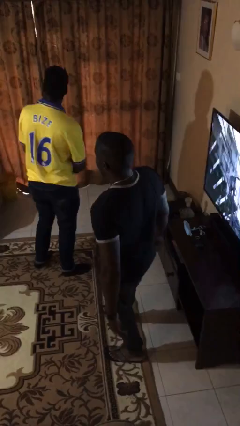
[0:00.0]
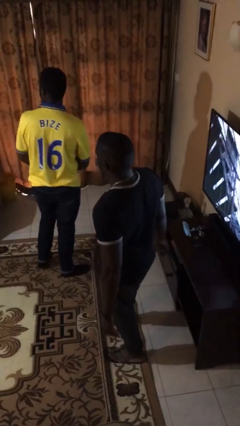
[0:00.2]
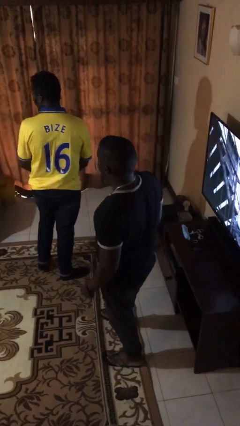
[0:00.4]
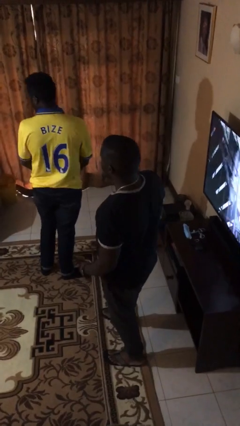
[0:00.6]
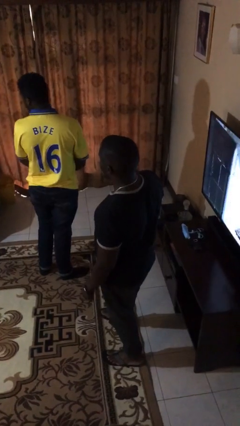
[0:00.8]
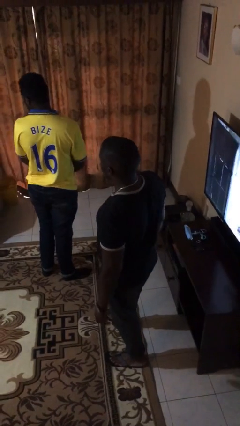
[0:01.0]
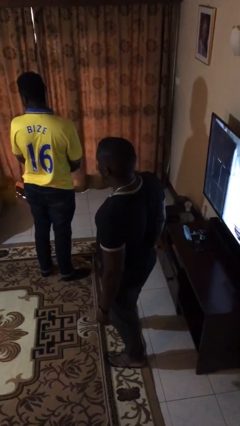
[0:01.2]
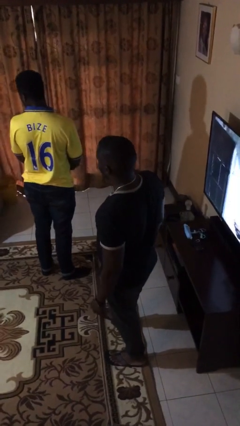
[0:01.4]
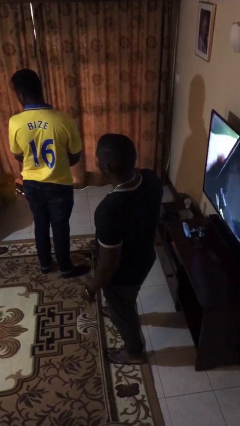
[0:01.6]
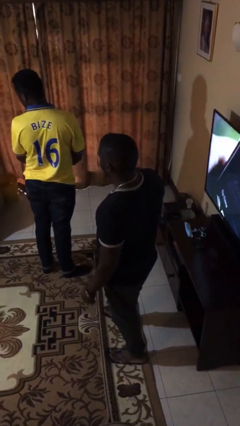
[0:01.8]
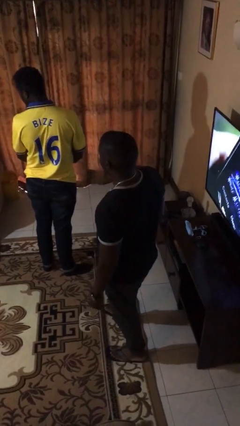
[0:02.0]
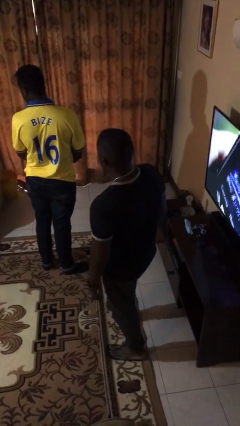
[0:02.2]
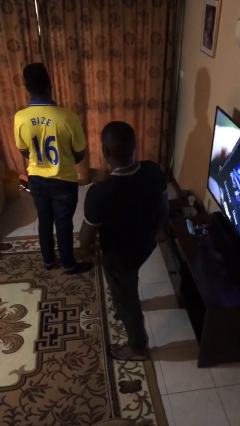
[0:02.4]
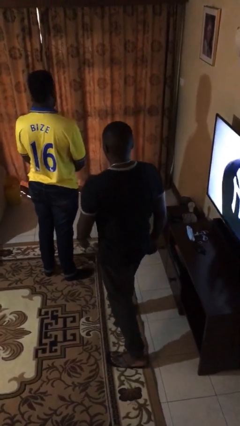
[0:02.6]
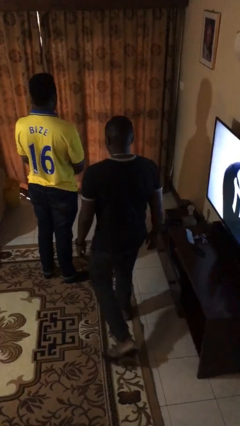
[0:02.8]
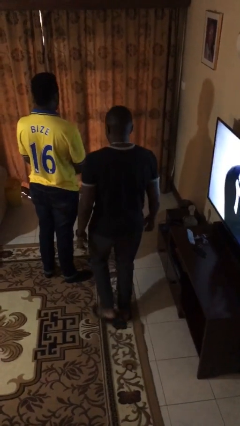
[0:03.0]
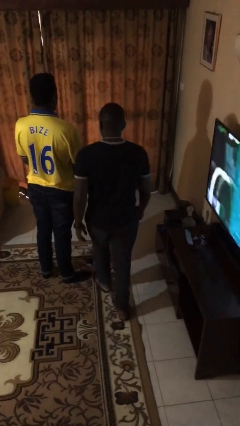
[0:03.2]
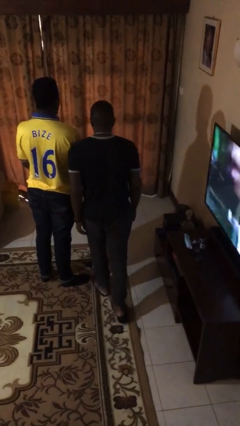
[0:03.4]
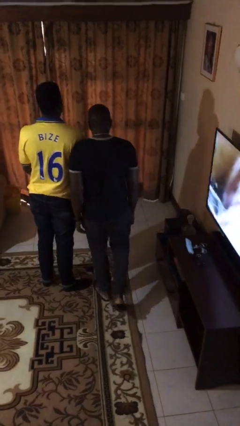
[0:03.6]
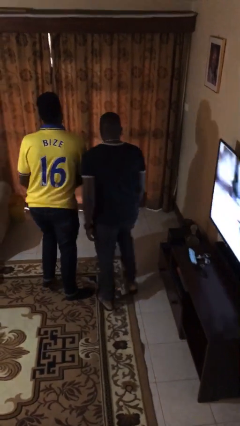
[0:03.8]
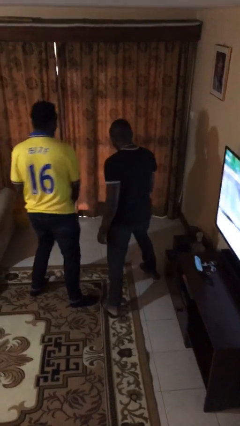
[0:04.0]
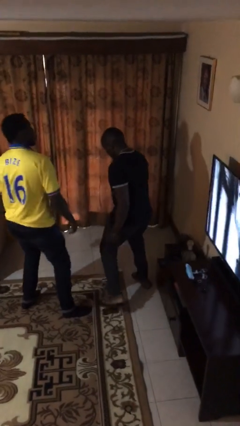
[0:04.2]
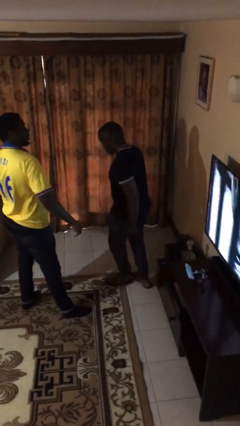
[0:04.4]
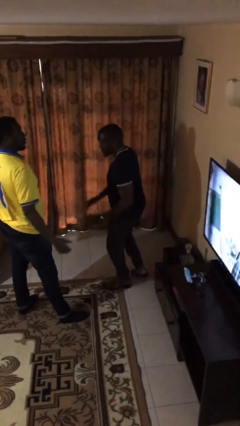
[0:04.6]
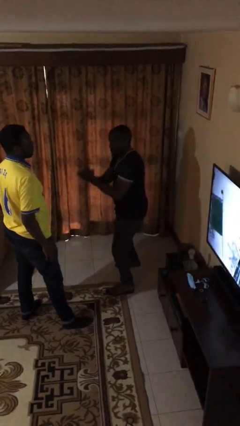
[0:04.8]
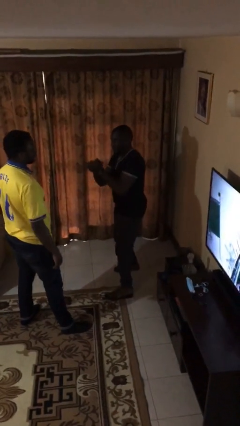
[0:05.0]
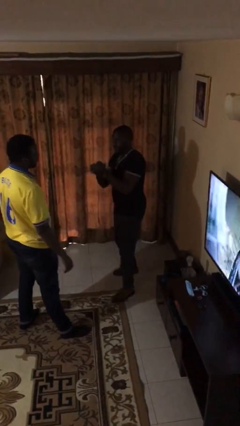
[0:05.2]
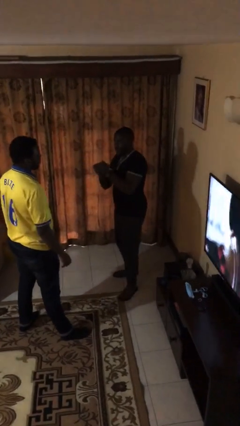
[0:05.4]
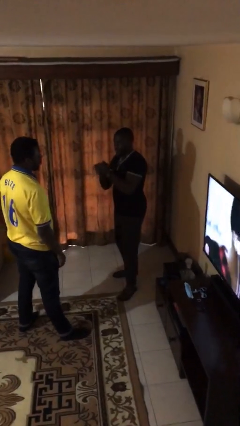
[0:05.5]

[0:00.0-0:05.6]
person bumps into person

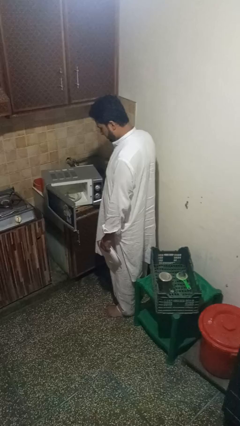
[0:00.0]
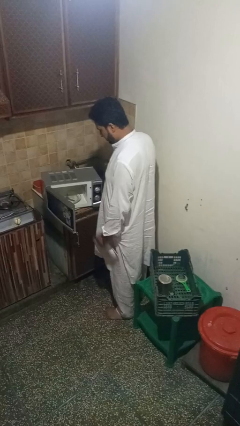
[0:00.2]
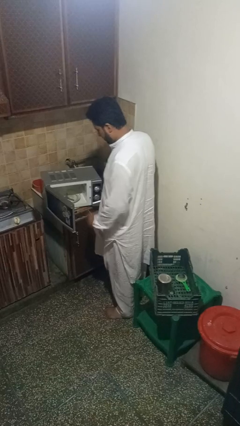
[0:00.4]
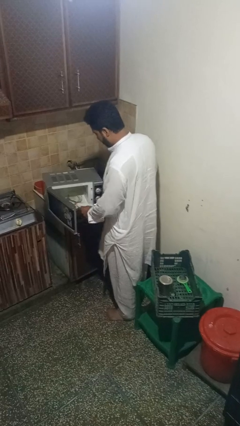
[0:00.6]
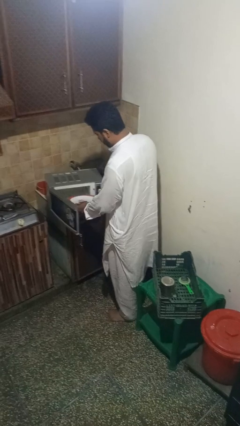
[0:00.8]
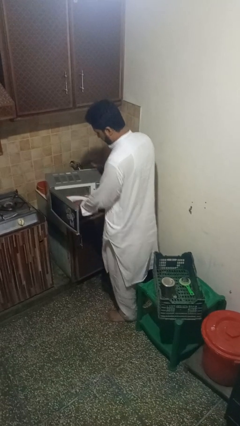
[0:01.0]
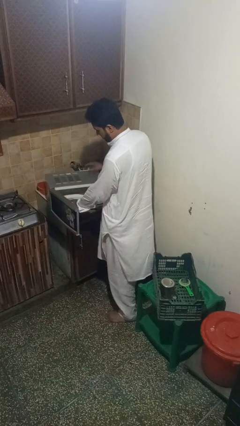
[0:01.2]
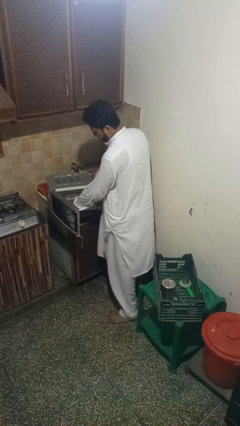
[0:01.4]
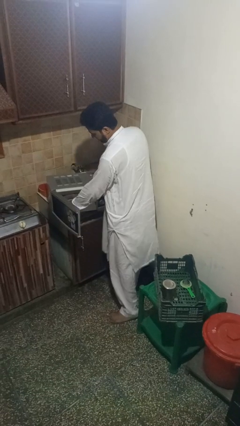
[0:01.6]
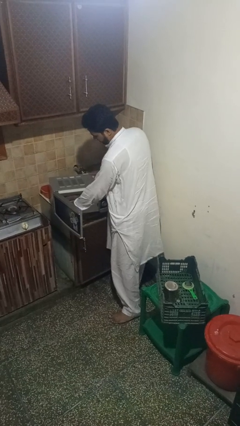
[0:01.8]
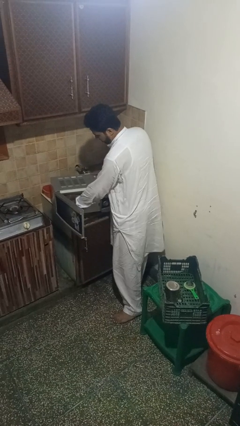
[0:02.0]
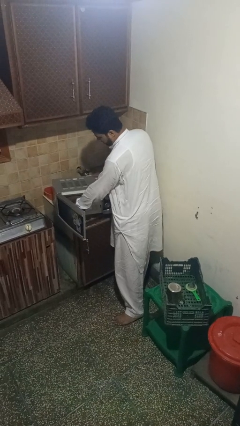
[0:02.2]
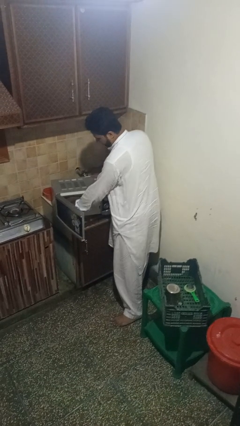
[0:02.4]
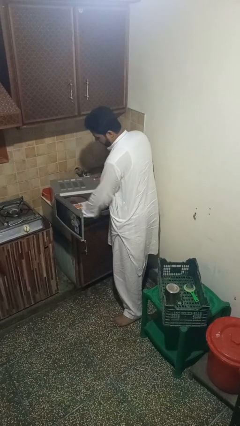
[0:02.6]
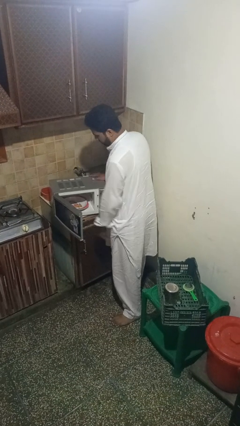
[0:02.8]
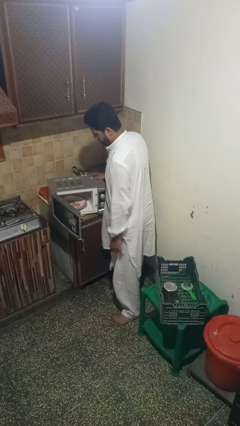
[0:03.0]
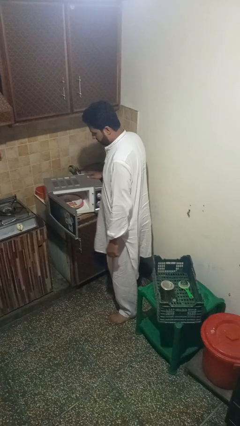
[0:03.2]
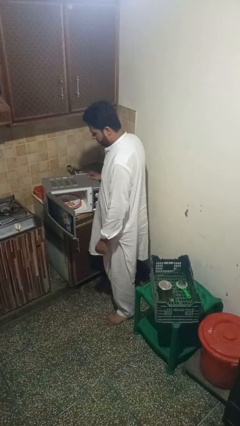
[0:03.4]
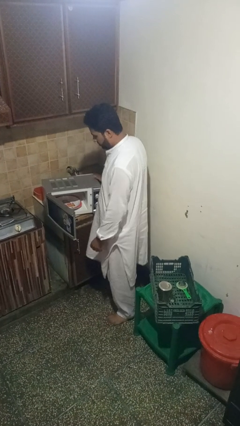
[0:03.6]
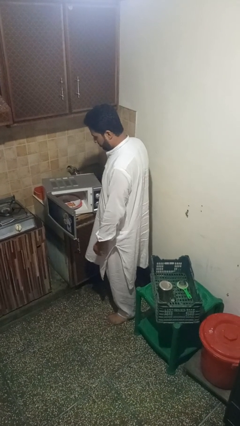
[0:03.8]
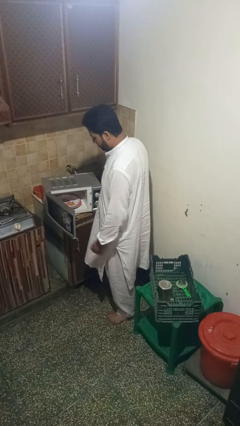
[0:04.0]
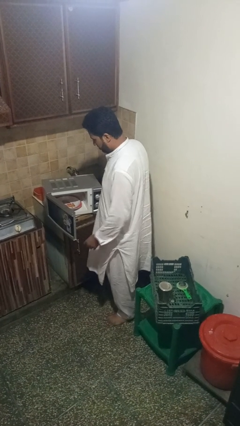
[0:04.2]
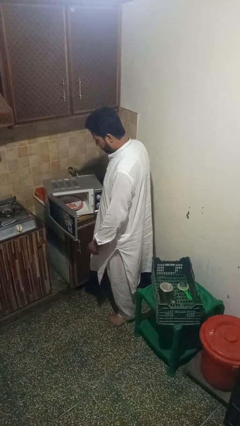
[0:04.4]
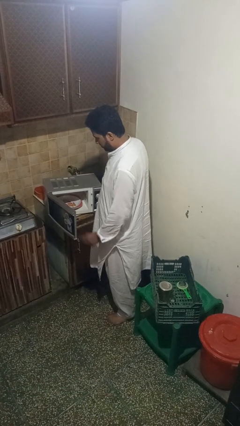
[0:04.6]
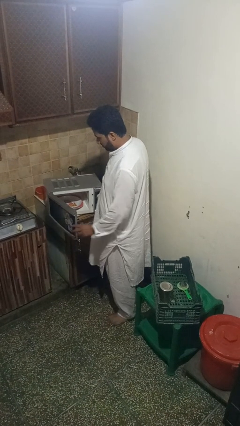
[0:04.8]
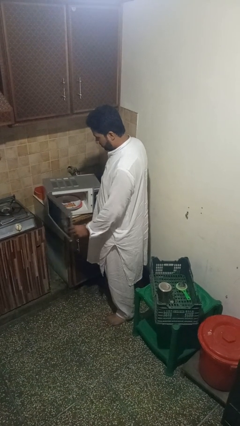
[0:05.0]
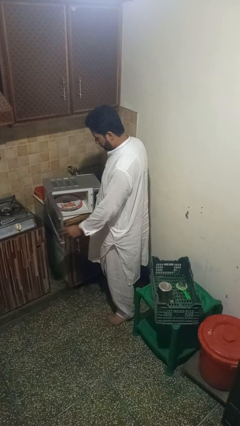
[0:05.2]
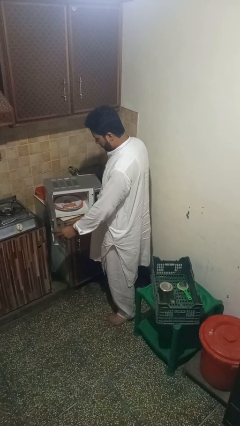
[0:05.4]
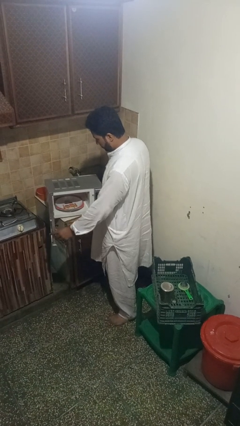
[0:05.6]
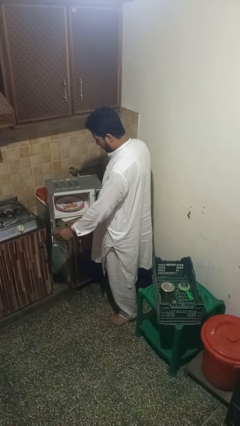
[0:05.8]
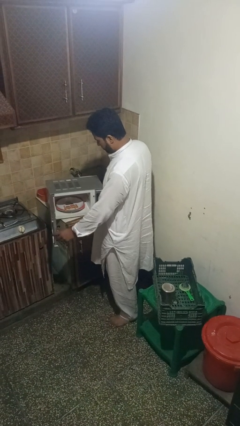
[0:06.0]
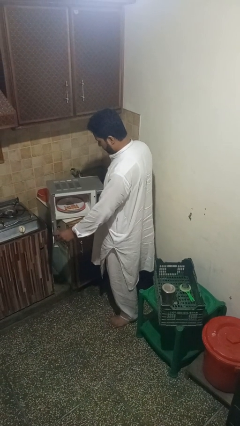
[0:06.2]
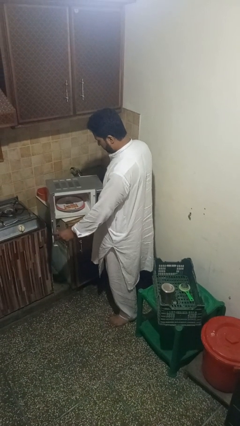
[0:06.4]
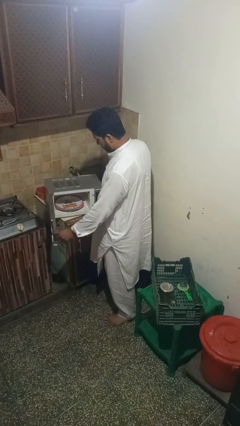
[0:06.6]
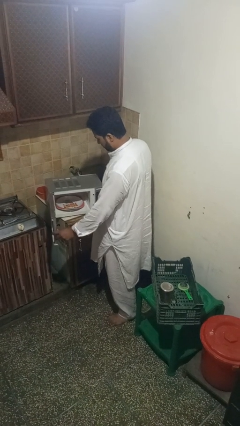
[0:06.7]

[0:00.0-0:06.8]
person puts object into microwave

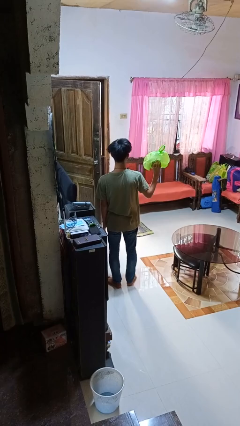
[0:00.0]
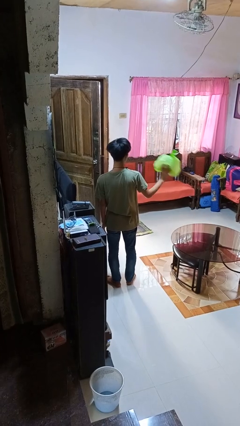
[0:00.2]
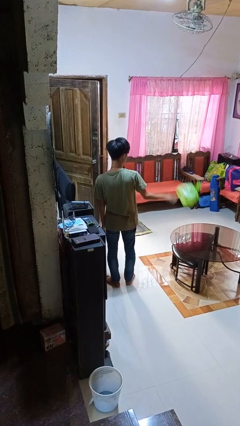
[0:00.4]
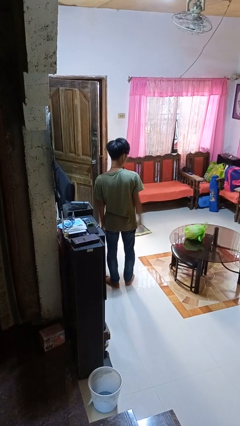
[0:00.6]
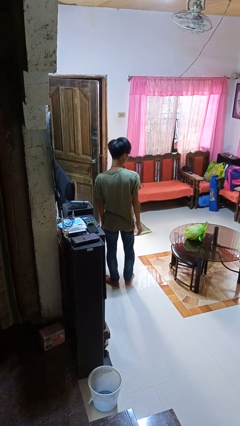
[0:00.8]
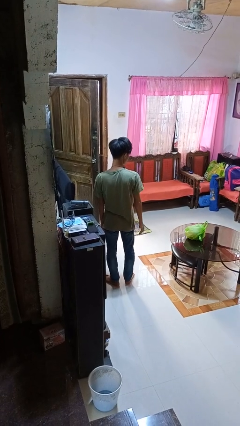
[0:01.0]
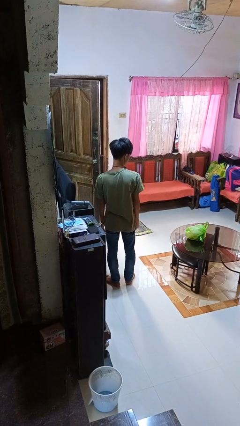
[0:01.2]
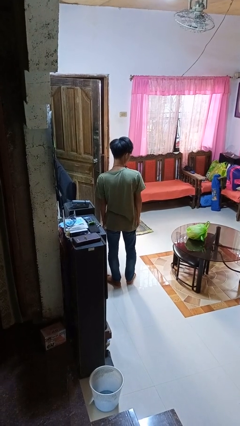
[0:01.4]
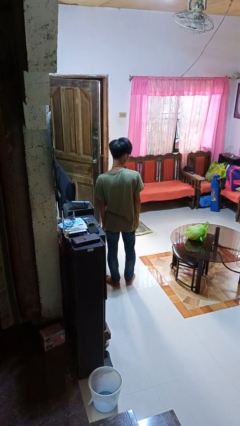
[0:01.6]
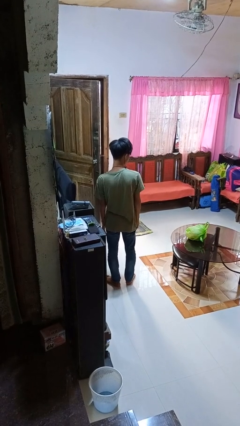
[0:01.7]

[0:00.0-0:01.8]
person throws object on table

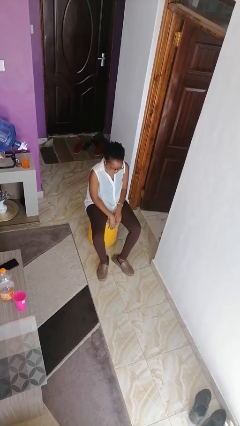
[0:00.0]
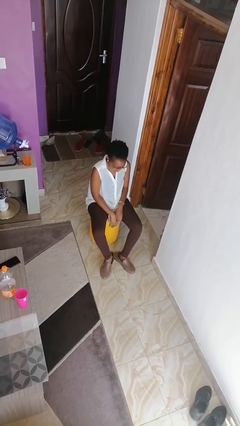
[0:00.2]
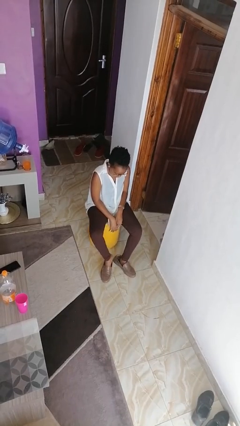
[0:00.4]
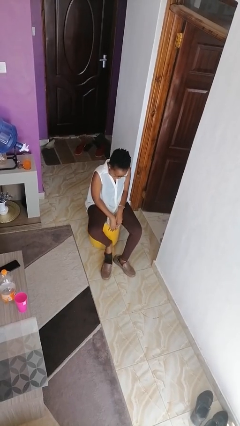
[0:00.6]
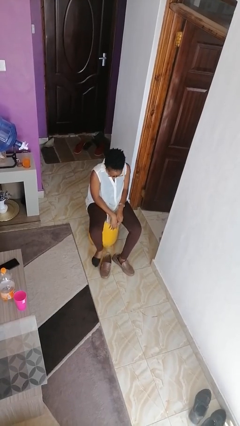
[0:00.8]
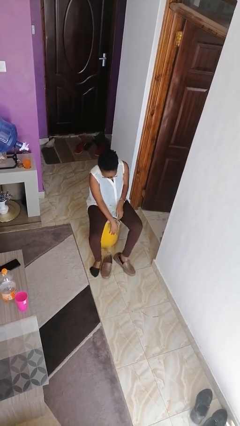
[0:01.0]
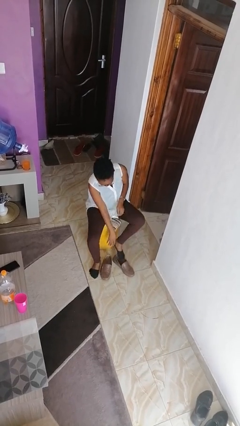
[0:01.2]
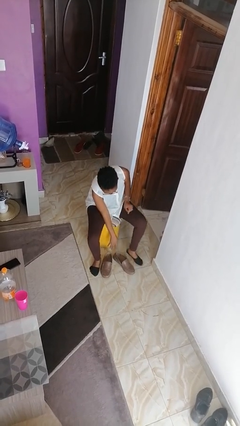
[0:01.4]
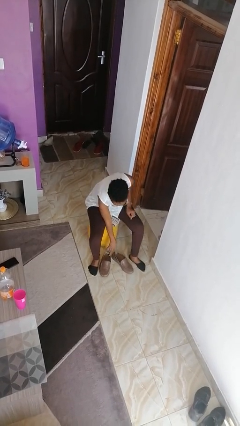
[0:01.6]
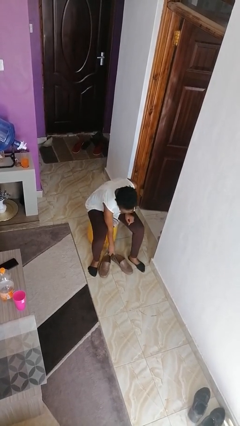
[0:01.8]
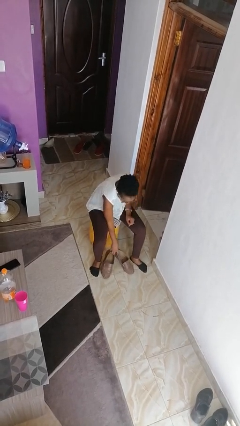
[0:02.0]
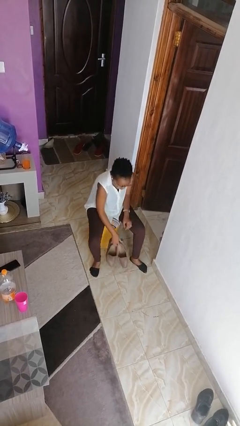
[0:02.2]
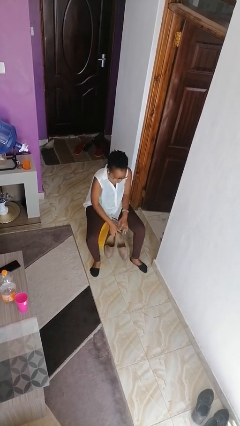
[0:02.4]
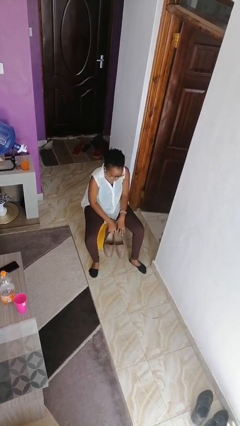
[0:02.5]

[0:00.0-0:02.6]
person takes off shoes

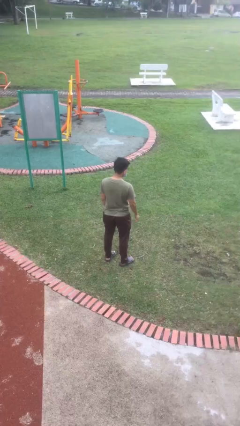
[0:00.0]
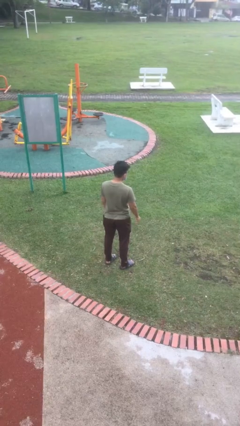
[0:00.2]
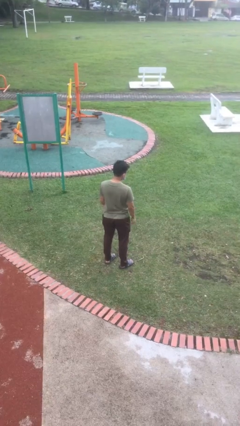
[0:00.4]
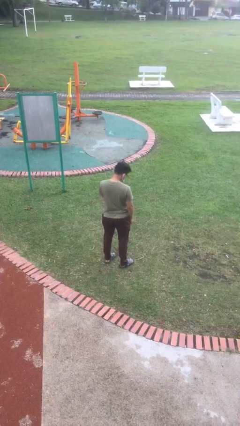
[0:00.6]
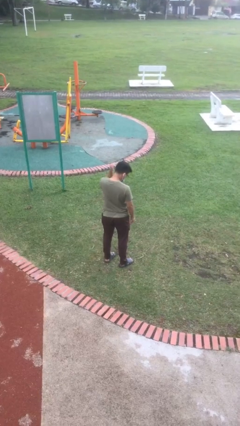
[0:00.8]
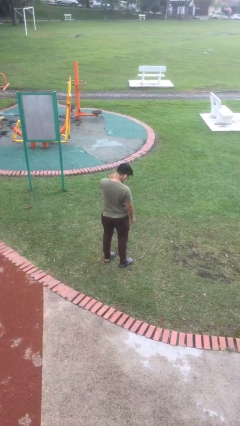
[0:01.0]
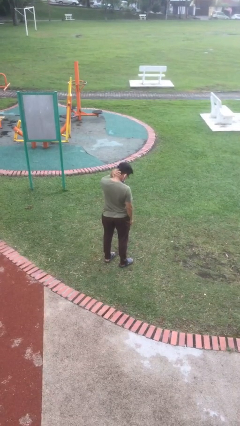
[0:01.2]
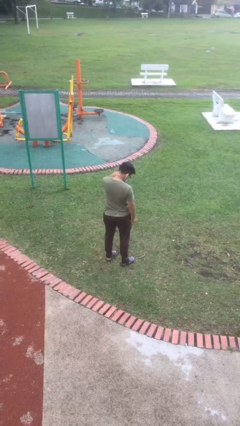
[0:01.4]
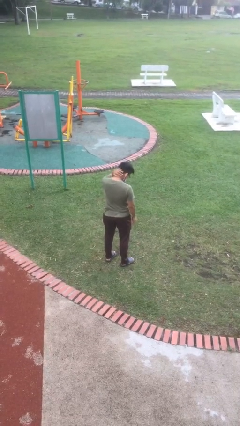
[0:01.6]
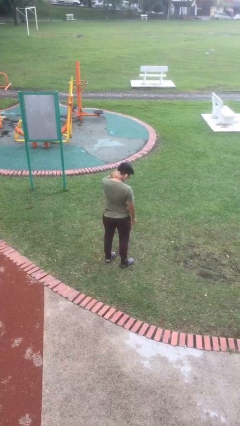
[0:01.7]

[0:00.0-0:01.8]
person rubs neck
